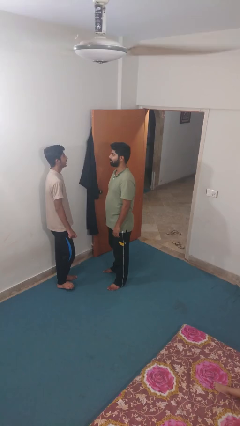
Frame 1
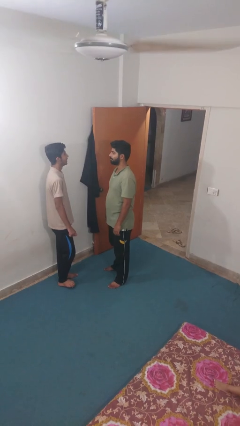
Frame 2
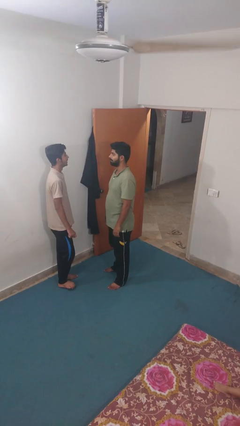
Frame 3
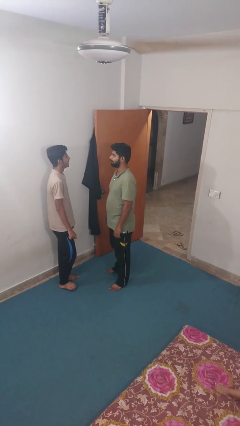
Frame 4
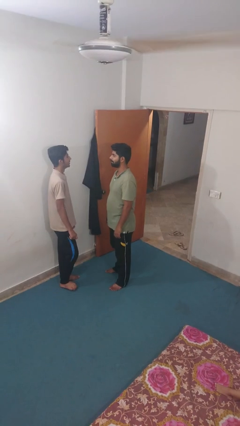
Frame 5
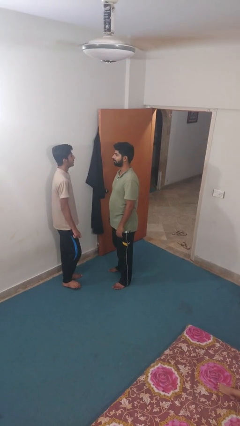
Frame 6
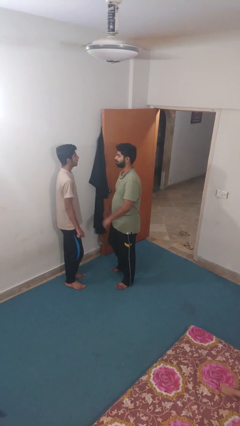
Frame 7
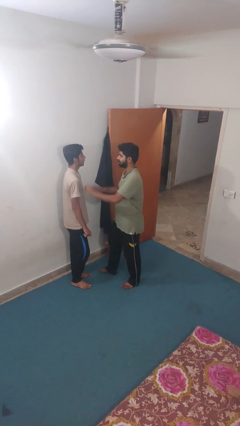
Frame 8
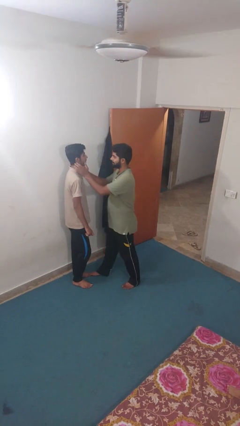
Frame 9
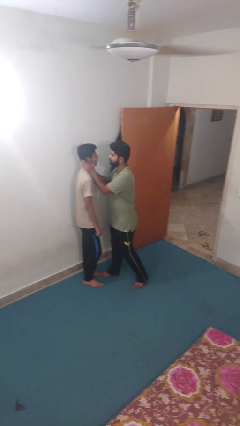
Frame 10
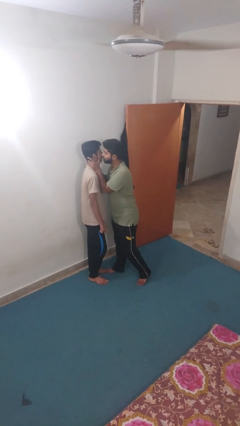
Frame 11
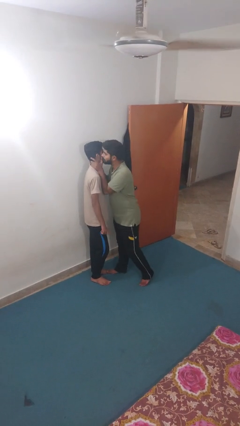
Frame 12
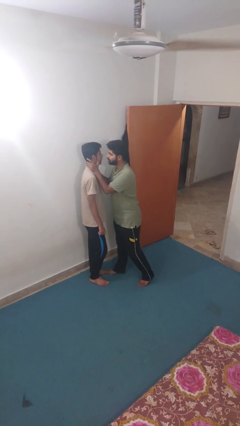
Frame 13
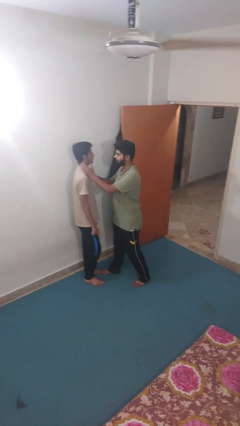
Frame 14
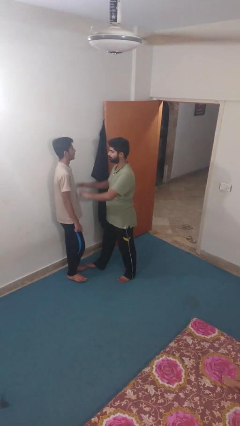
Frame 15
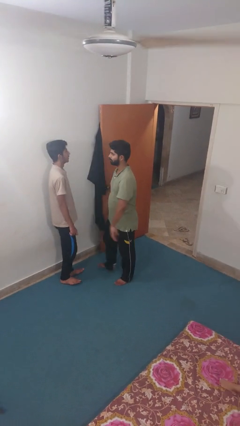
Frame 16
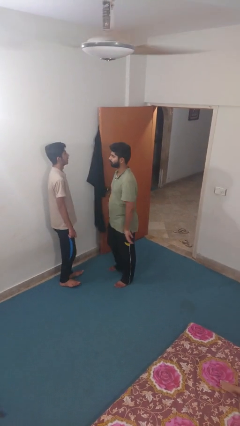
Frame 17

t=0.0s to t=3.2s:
person kisses cheek of person

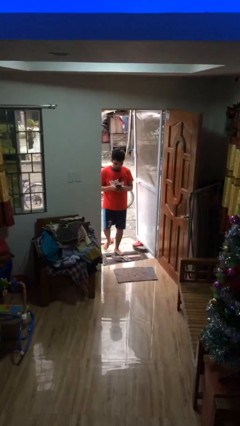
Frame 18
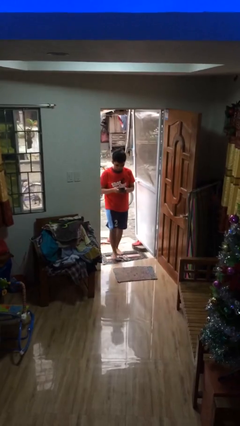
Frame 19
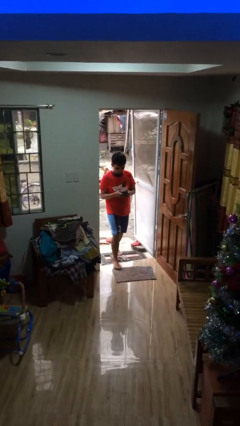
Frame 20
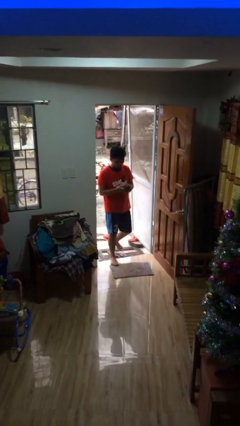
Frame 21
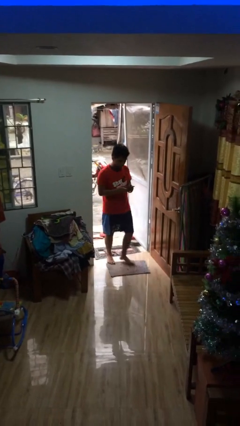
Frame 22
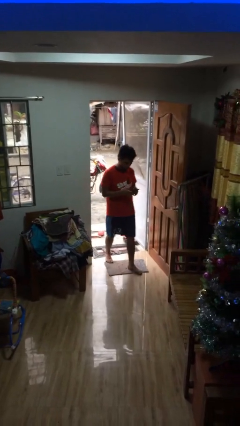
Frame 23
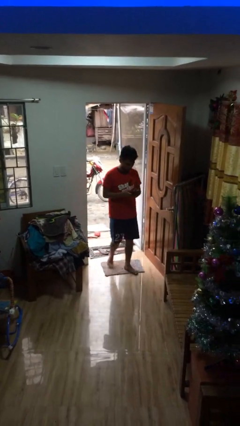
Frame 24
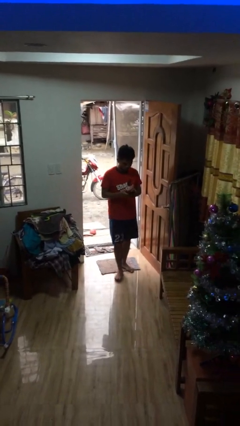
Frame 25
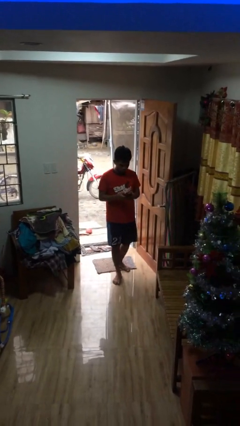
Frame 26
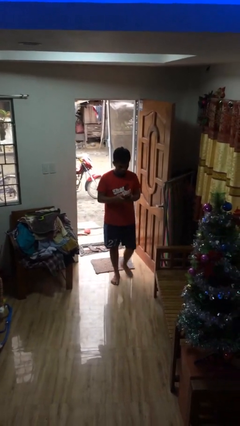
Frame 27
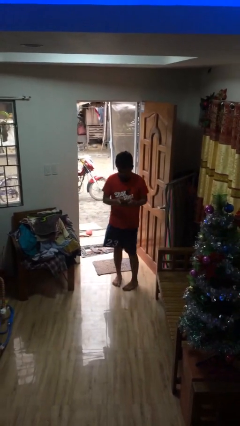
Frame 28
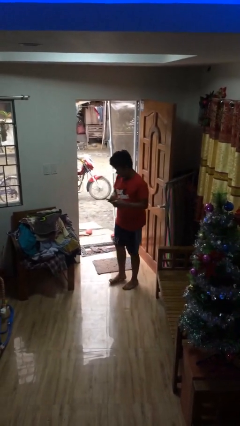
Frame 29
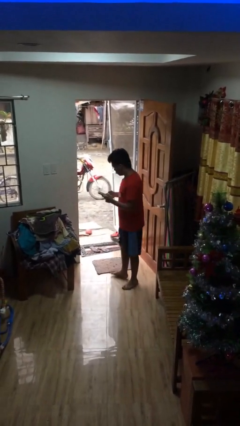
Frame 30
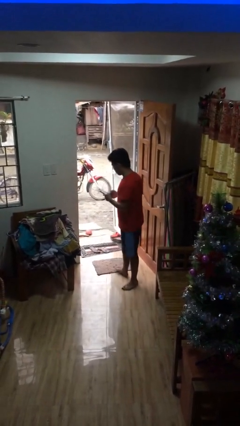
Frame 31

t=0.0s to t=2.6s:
person enters scene through structure

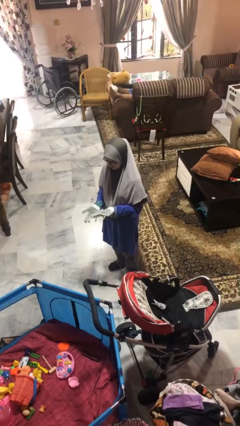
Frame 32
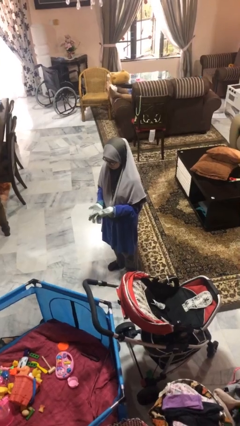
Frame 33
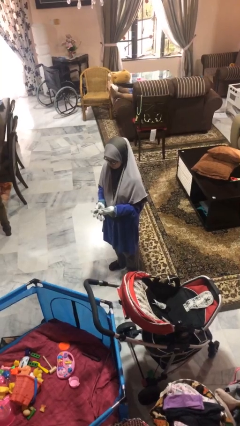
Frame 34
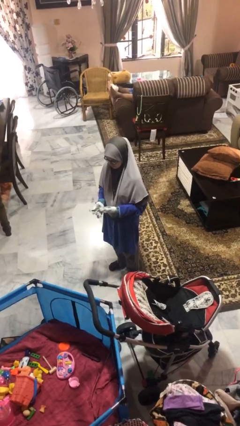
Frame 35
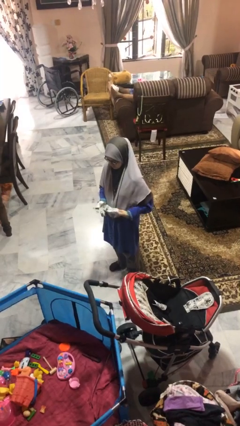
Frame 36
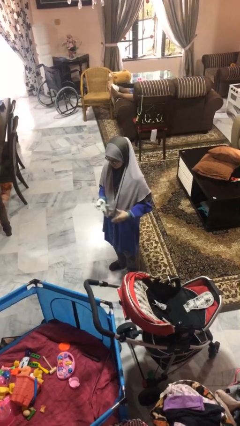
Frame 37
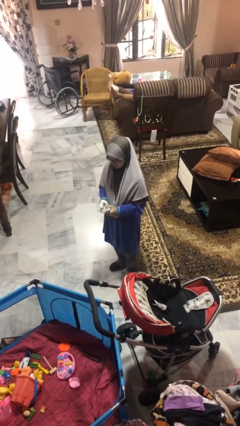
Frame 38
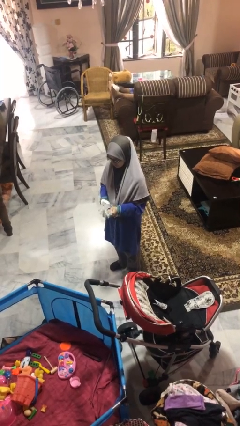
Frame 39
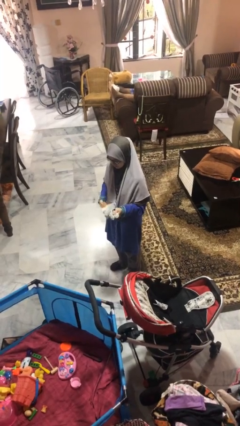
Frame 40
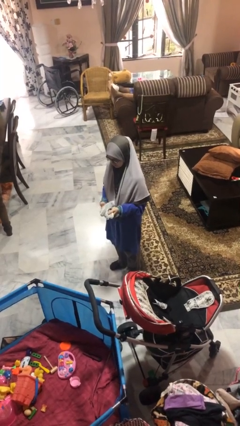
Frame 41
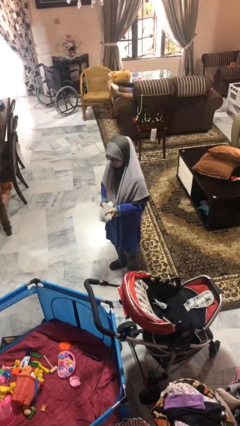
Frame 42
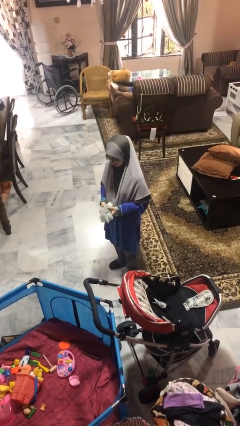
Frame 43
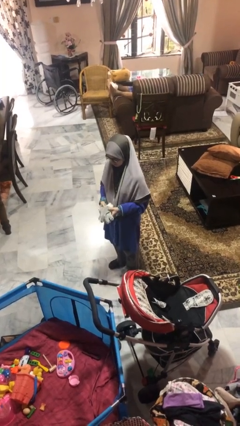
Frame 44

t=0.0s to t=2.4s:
person takes off gloves

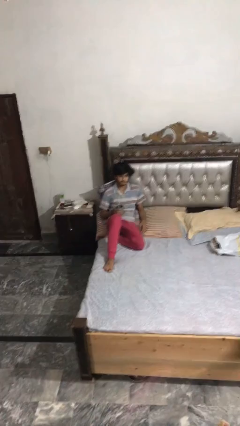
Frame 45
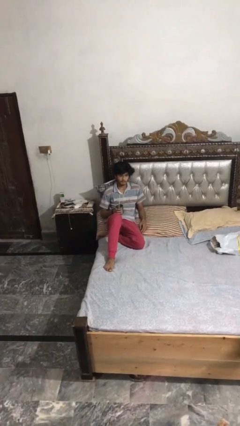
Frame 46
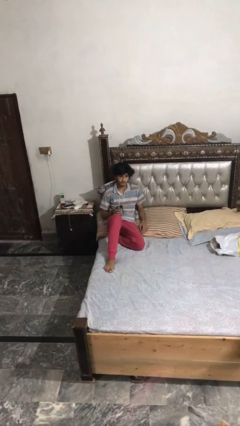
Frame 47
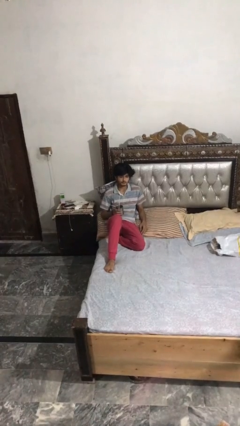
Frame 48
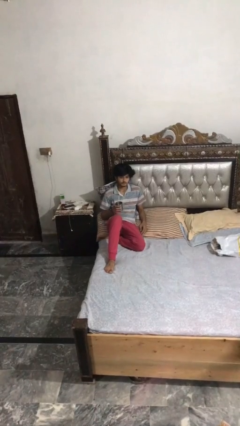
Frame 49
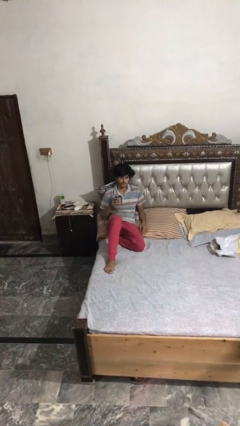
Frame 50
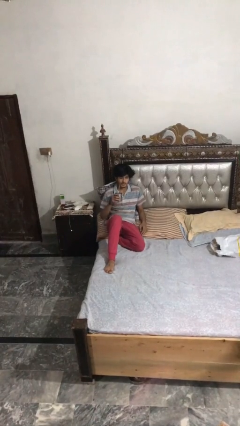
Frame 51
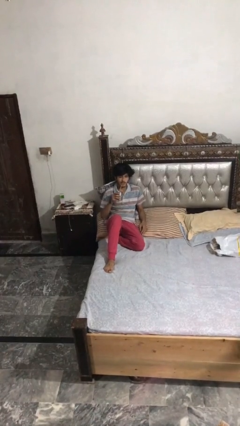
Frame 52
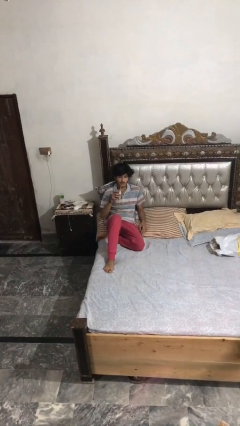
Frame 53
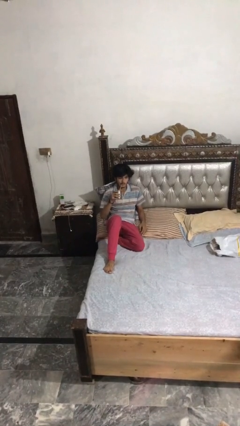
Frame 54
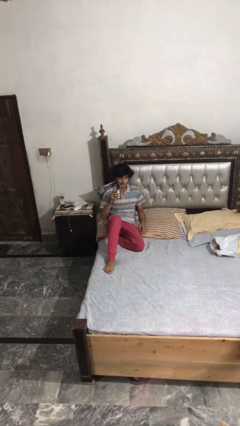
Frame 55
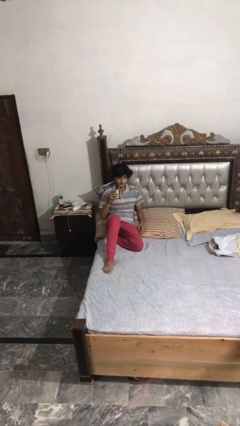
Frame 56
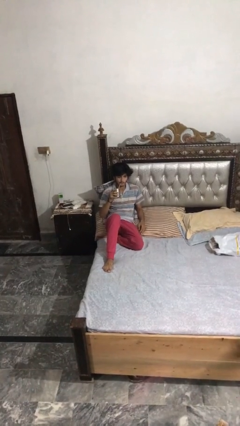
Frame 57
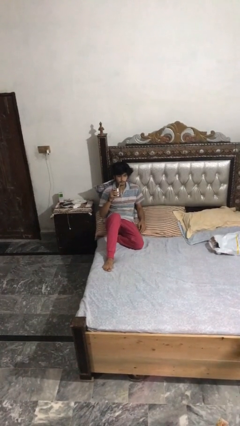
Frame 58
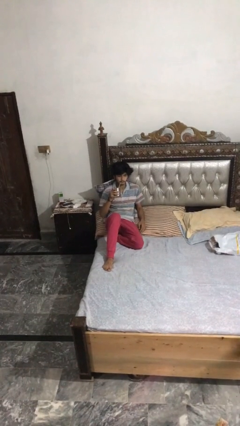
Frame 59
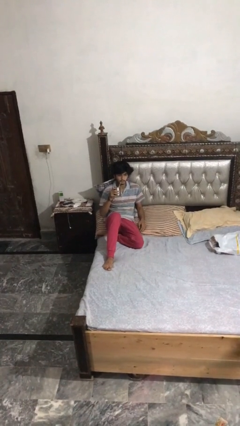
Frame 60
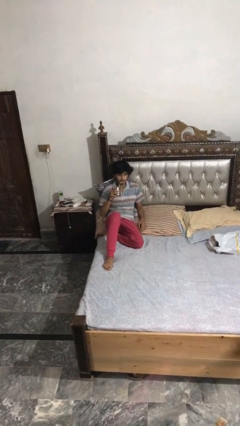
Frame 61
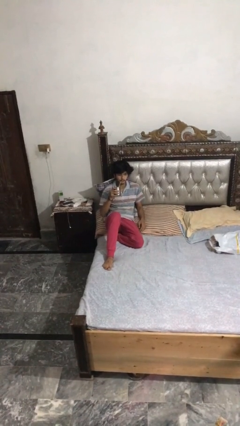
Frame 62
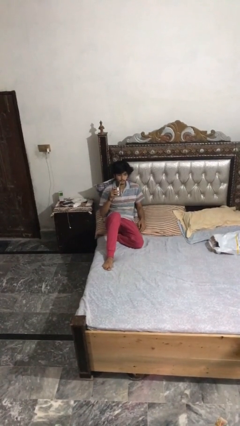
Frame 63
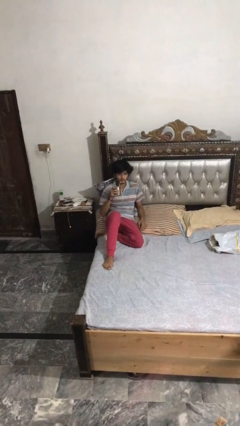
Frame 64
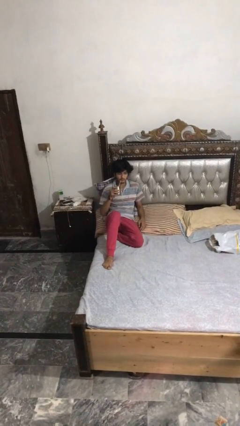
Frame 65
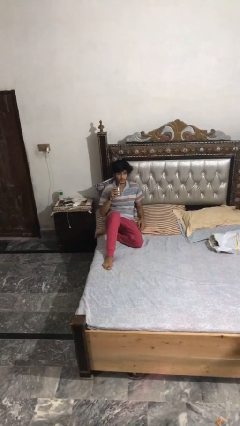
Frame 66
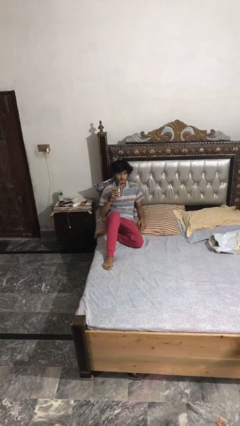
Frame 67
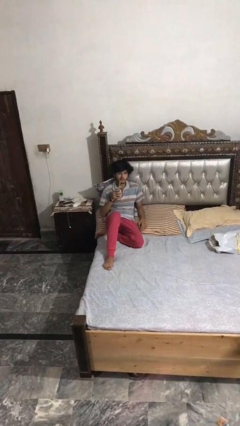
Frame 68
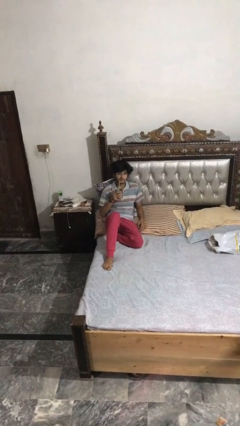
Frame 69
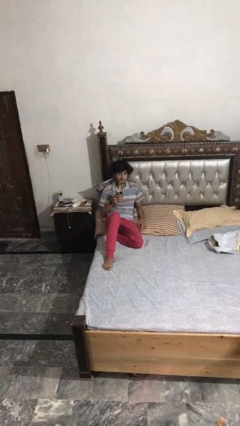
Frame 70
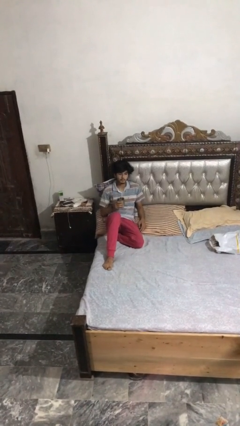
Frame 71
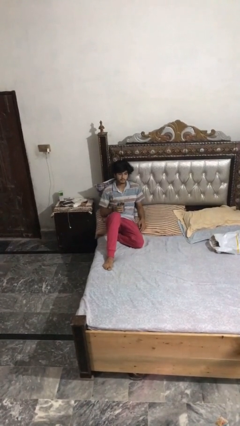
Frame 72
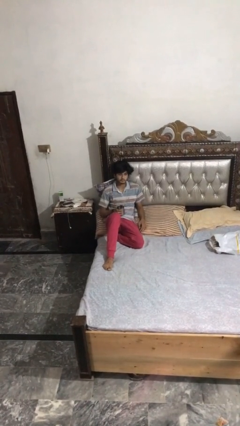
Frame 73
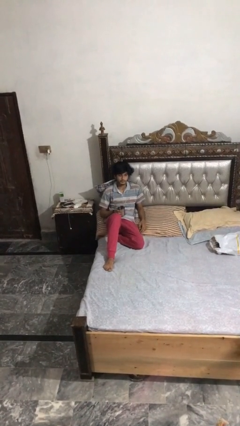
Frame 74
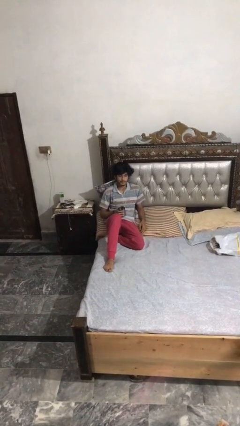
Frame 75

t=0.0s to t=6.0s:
person drinks from straw

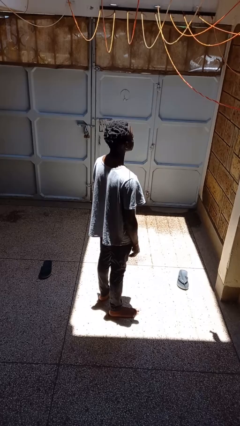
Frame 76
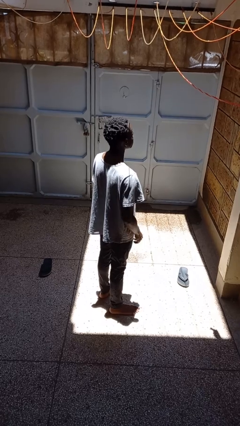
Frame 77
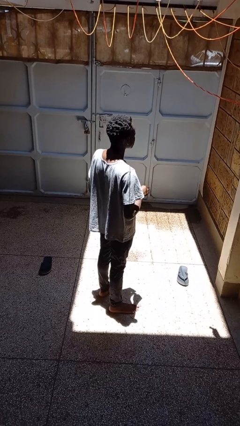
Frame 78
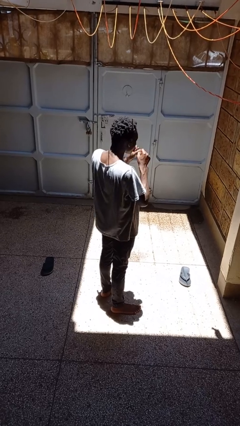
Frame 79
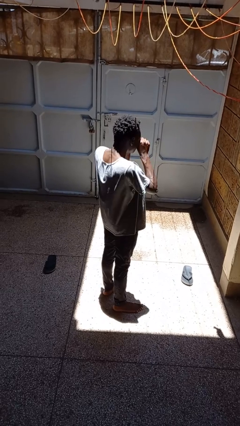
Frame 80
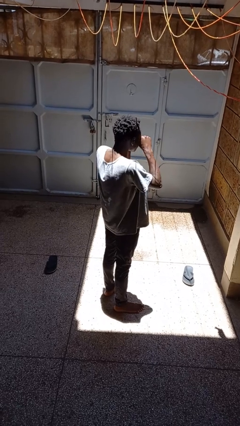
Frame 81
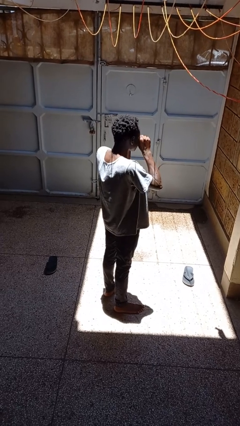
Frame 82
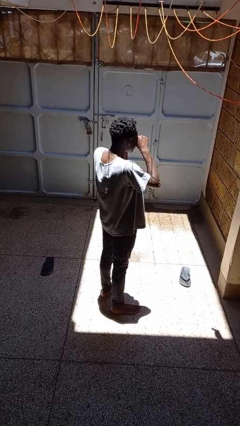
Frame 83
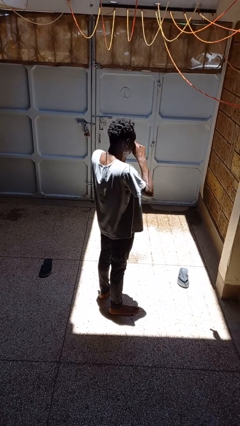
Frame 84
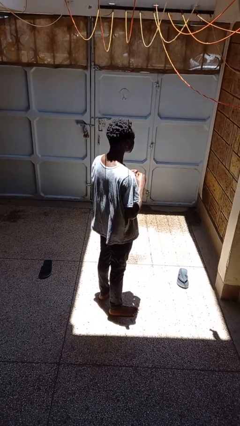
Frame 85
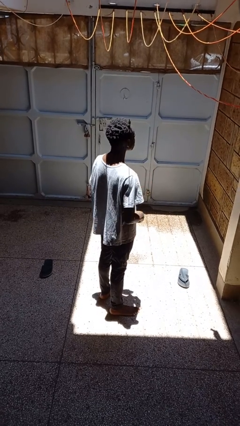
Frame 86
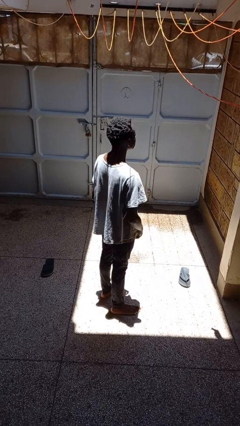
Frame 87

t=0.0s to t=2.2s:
person rubs eyes

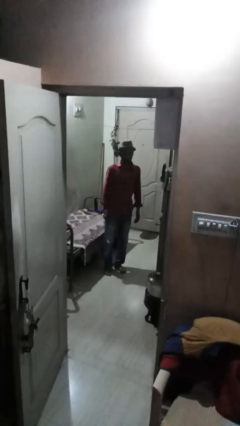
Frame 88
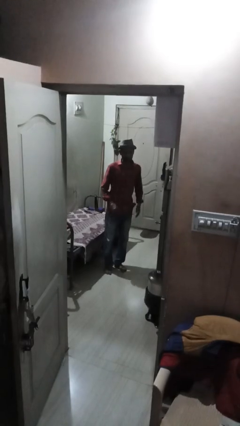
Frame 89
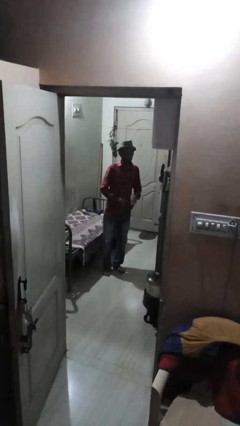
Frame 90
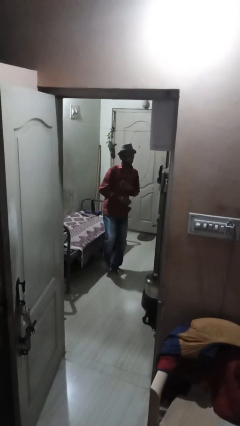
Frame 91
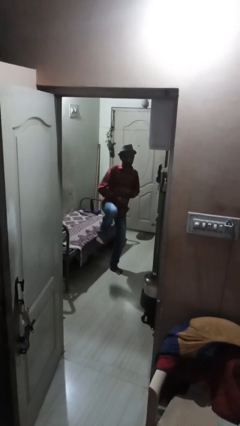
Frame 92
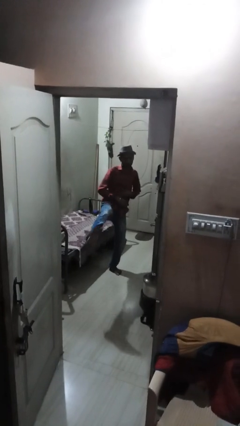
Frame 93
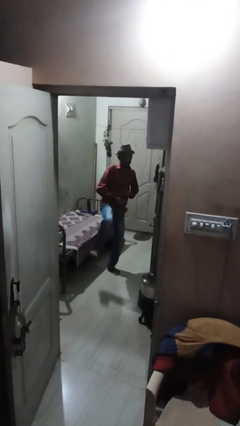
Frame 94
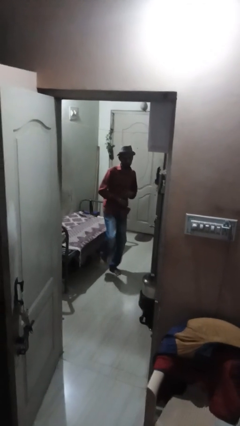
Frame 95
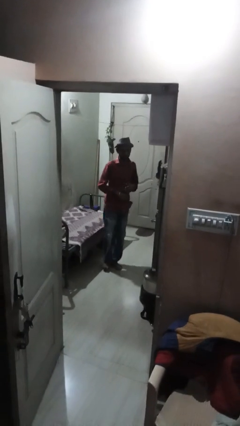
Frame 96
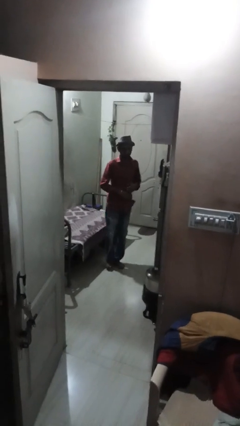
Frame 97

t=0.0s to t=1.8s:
person karate kicks
